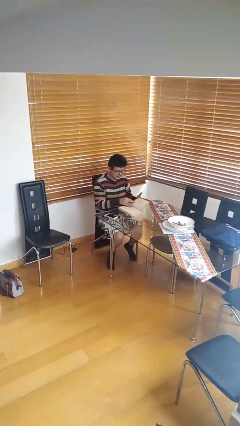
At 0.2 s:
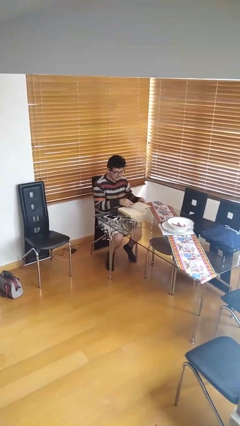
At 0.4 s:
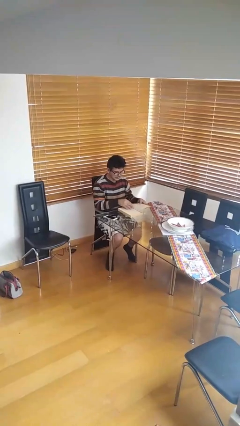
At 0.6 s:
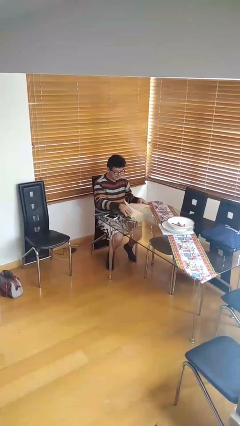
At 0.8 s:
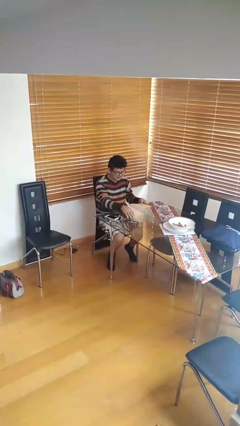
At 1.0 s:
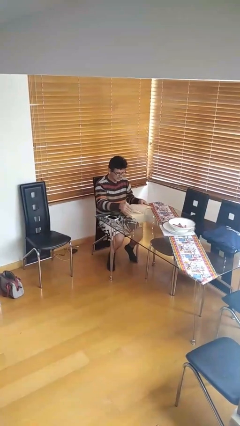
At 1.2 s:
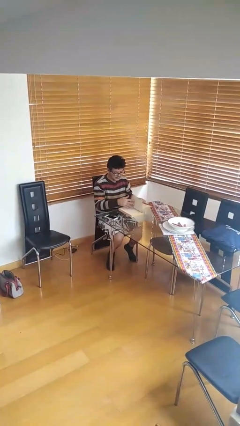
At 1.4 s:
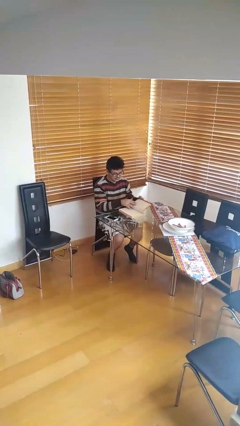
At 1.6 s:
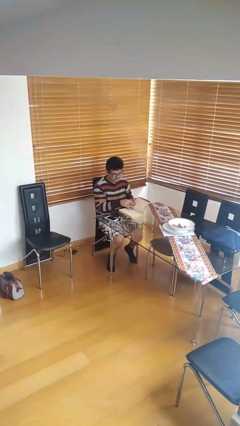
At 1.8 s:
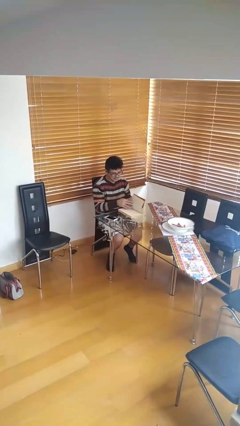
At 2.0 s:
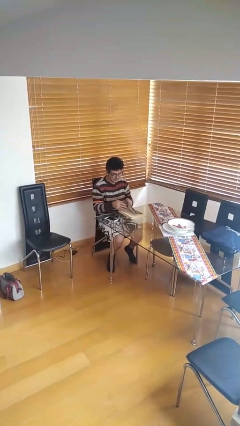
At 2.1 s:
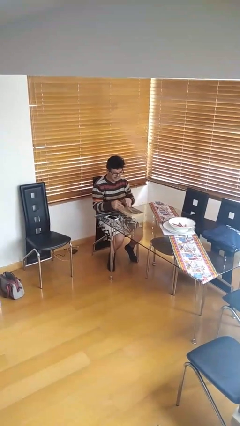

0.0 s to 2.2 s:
person reads document

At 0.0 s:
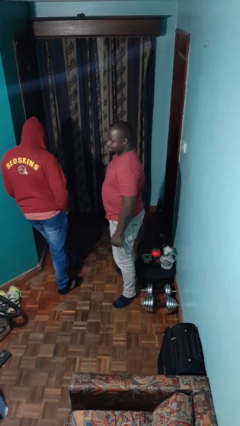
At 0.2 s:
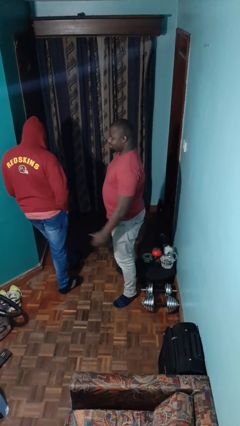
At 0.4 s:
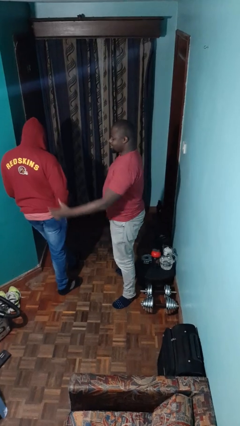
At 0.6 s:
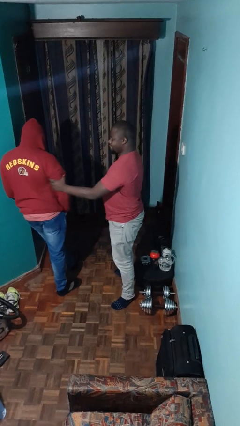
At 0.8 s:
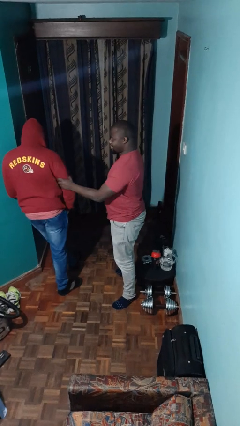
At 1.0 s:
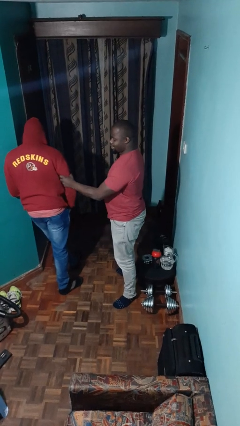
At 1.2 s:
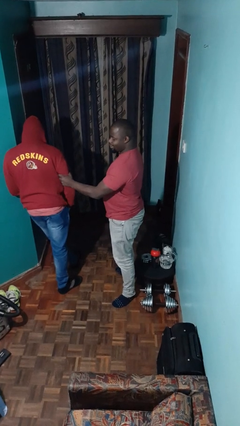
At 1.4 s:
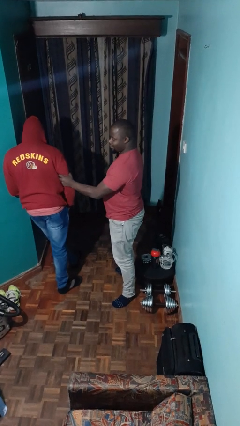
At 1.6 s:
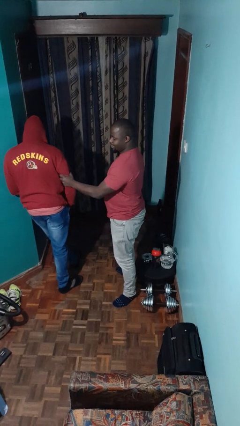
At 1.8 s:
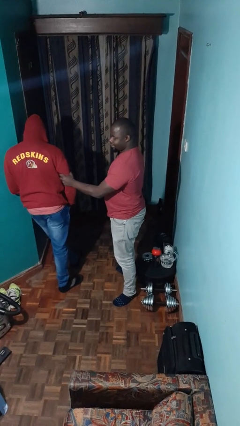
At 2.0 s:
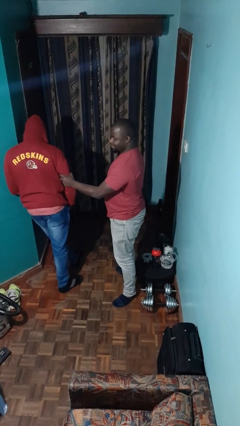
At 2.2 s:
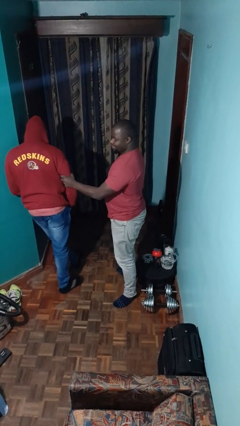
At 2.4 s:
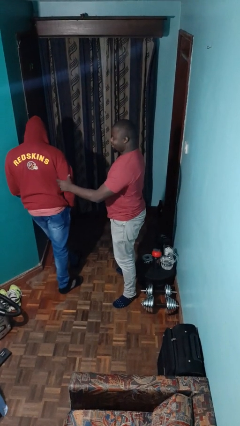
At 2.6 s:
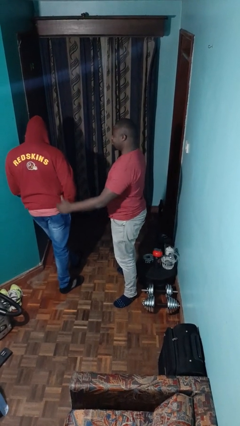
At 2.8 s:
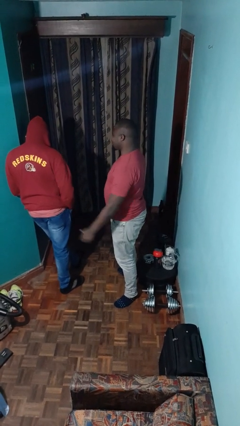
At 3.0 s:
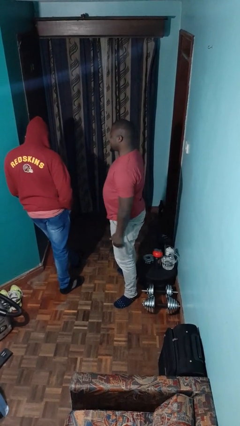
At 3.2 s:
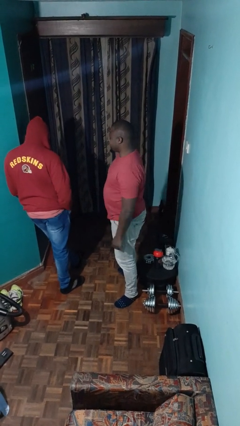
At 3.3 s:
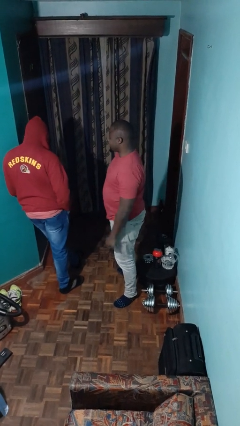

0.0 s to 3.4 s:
person grabs person by bicep

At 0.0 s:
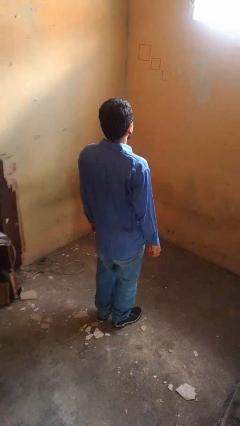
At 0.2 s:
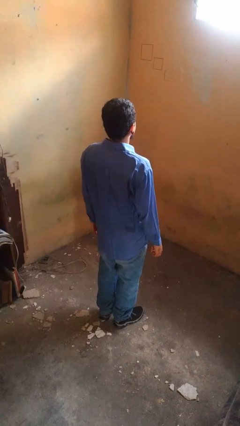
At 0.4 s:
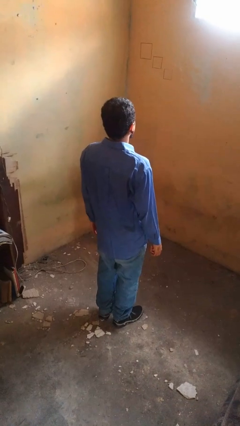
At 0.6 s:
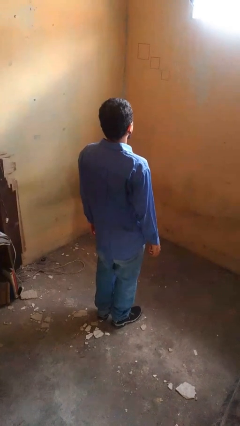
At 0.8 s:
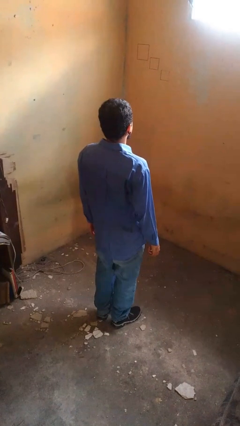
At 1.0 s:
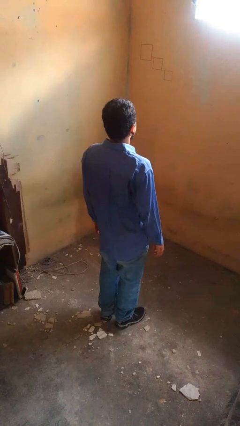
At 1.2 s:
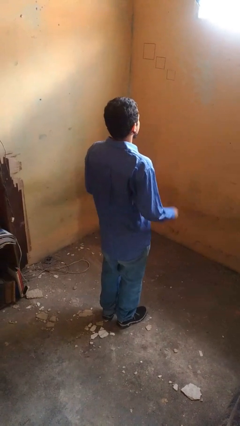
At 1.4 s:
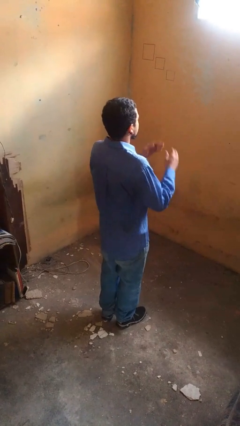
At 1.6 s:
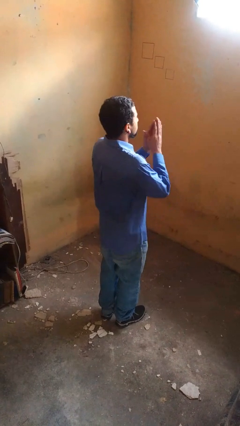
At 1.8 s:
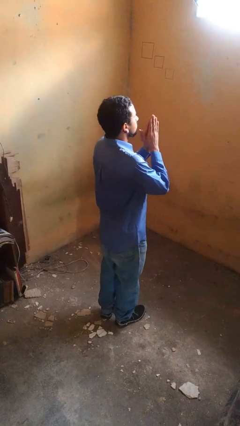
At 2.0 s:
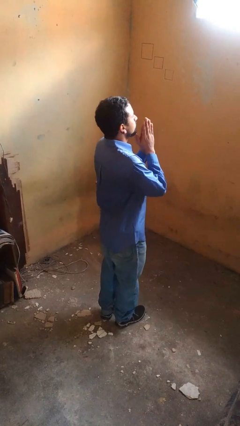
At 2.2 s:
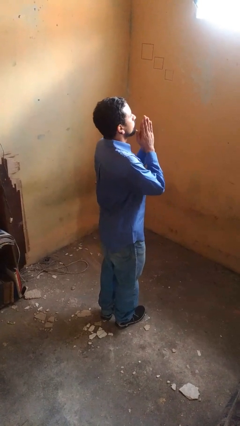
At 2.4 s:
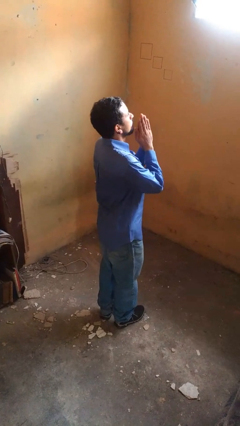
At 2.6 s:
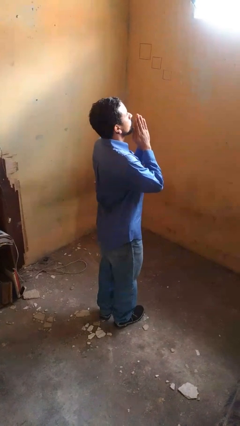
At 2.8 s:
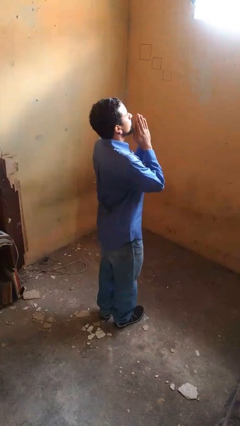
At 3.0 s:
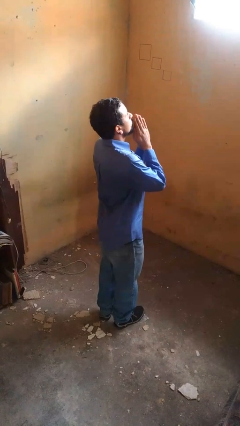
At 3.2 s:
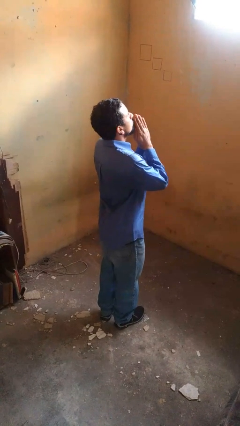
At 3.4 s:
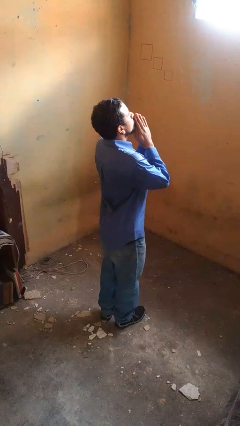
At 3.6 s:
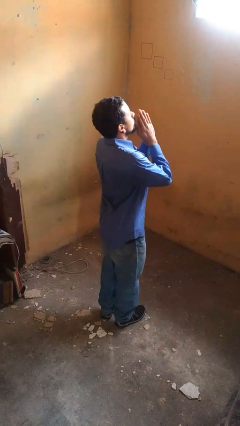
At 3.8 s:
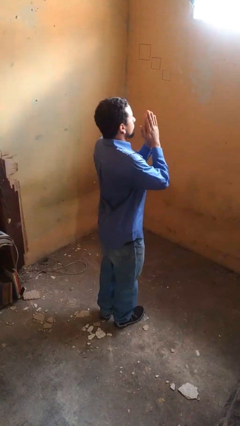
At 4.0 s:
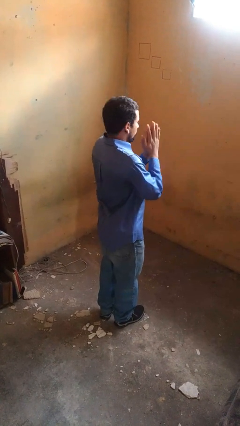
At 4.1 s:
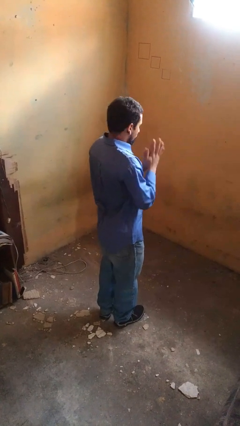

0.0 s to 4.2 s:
person prays

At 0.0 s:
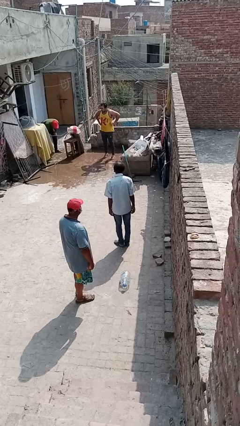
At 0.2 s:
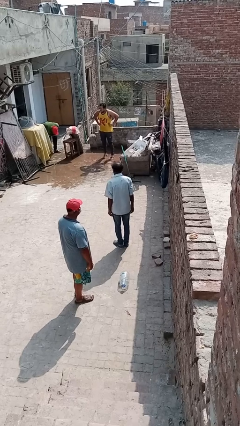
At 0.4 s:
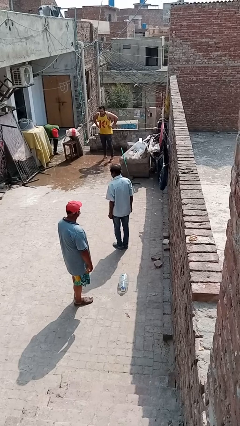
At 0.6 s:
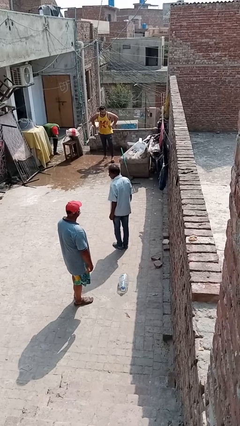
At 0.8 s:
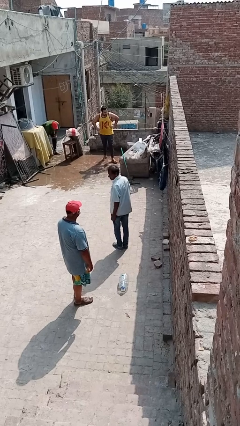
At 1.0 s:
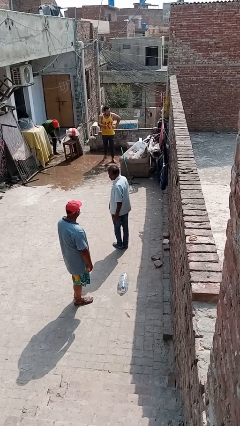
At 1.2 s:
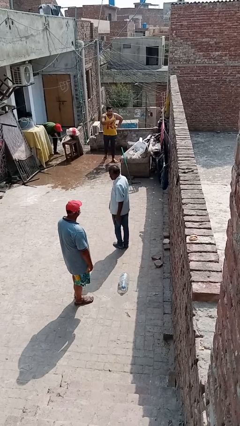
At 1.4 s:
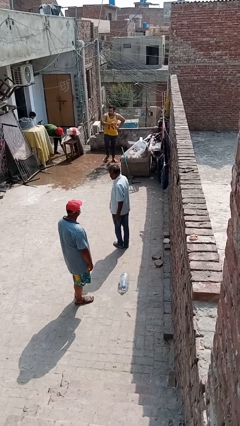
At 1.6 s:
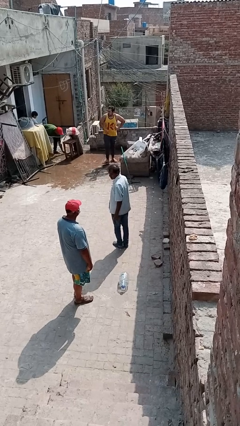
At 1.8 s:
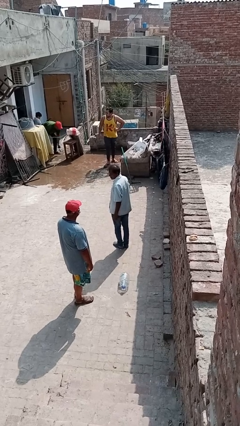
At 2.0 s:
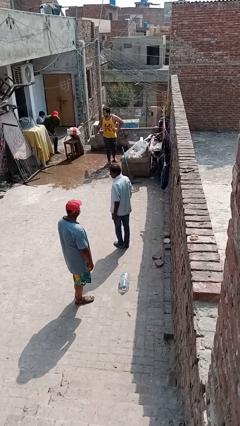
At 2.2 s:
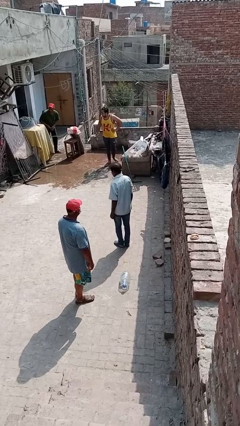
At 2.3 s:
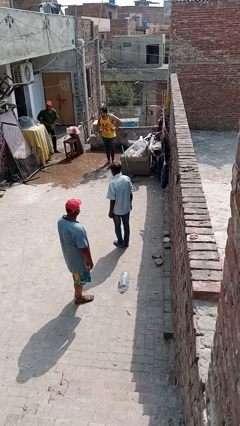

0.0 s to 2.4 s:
person looks over shoulder

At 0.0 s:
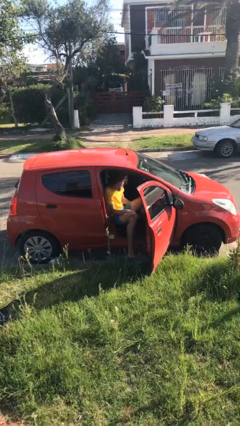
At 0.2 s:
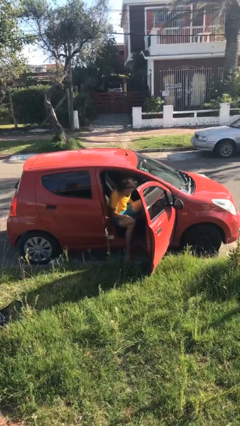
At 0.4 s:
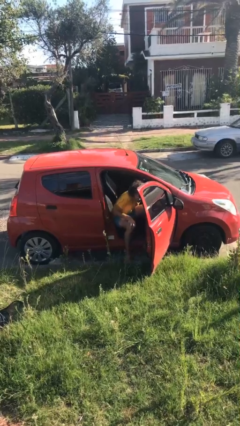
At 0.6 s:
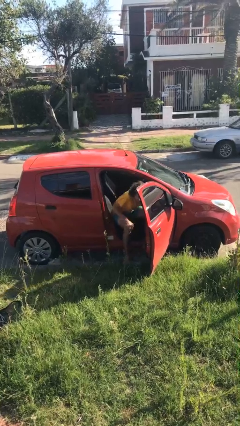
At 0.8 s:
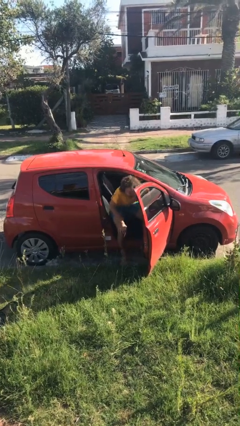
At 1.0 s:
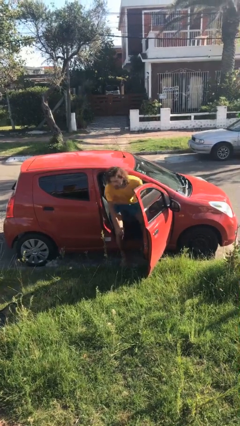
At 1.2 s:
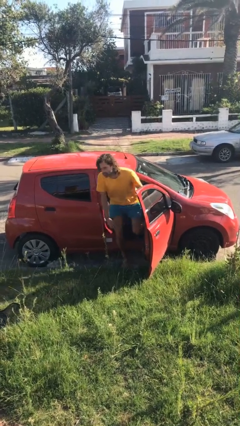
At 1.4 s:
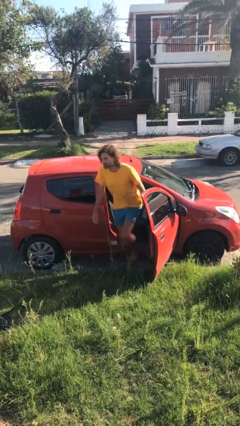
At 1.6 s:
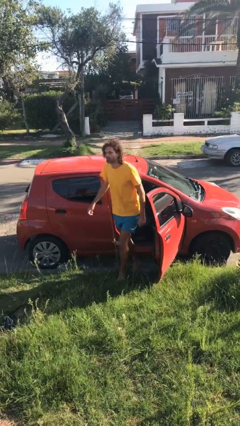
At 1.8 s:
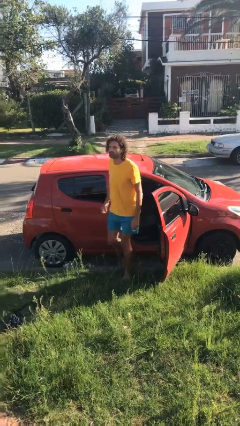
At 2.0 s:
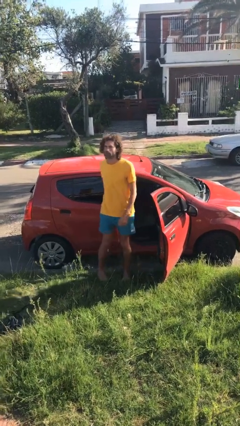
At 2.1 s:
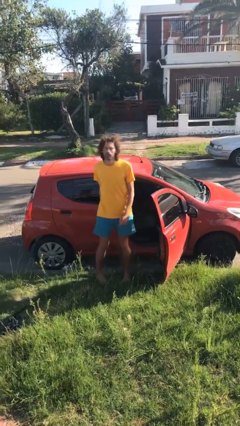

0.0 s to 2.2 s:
person exits car

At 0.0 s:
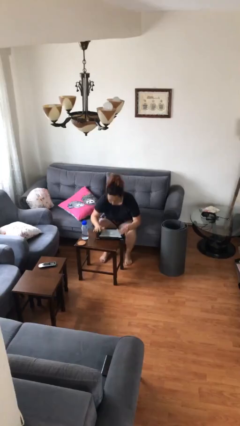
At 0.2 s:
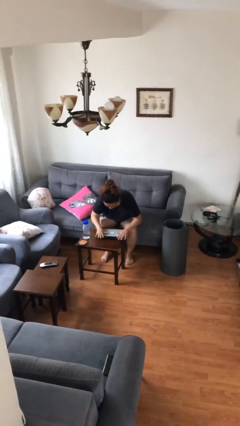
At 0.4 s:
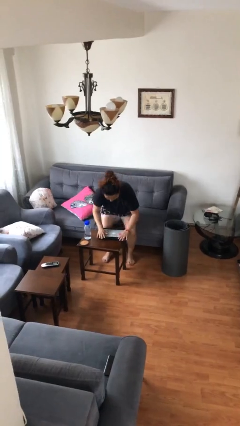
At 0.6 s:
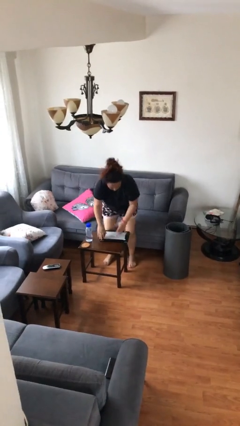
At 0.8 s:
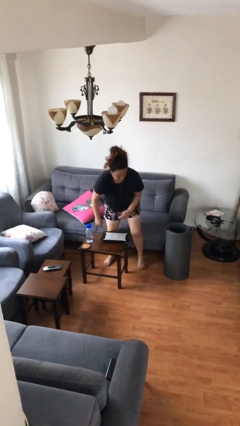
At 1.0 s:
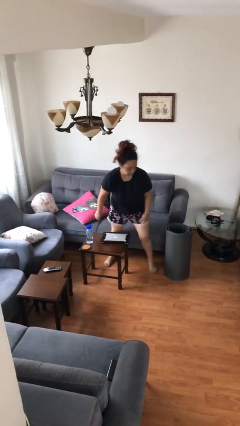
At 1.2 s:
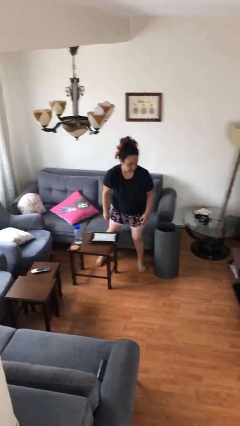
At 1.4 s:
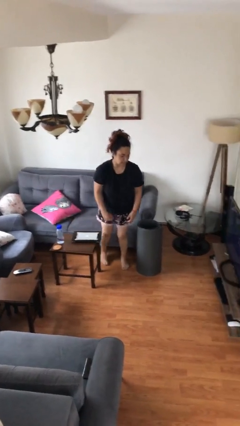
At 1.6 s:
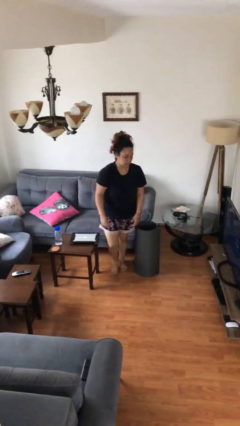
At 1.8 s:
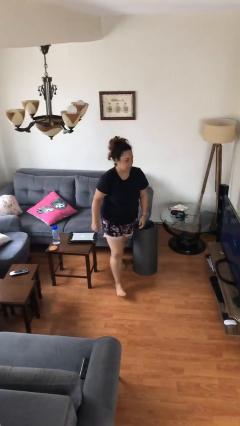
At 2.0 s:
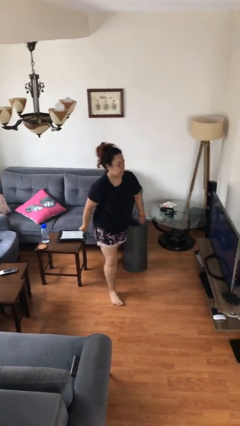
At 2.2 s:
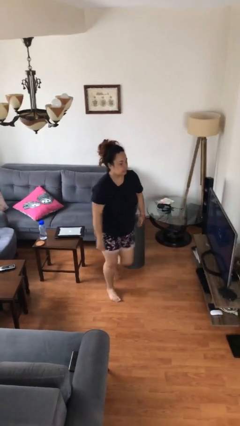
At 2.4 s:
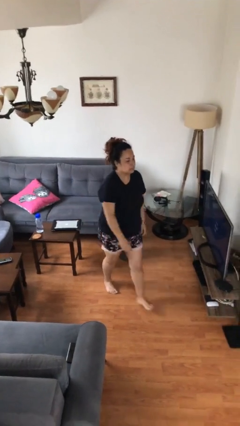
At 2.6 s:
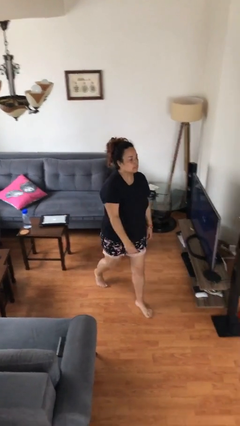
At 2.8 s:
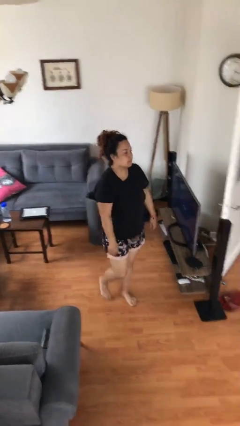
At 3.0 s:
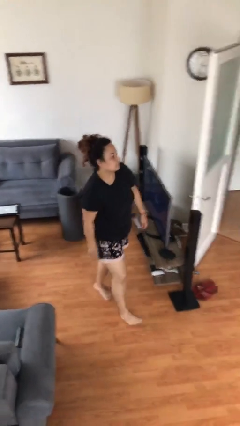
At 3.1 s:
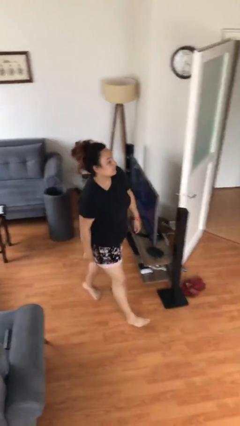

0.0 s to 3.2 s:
person stands up
